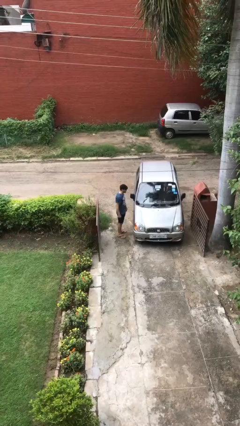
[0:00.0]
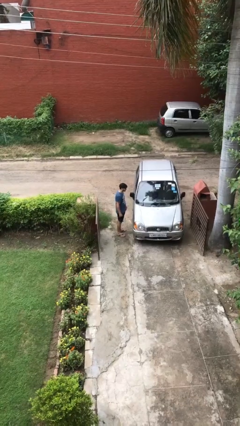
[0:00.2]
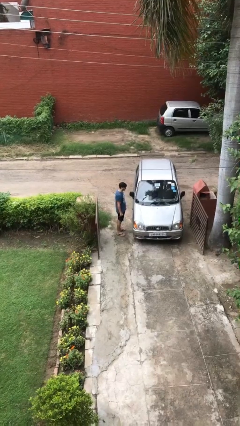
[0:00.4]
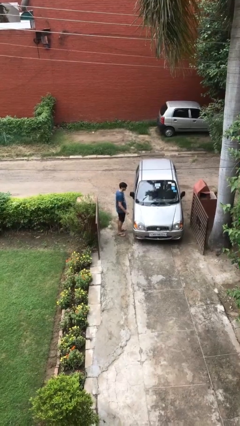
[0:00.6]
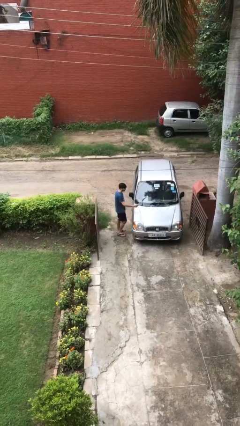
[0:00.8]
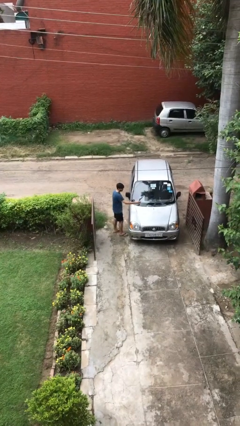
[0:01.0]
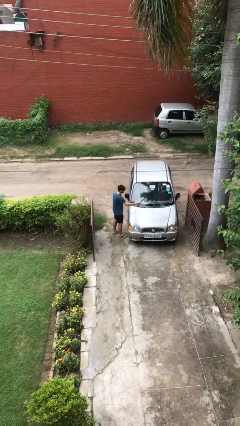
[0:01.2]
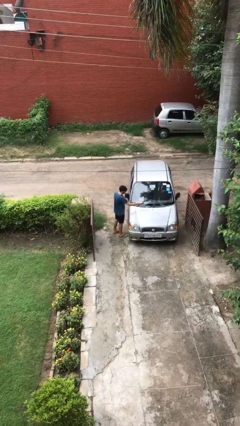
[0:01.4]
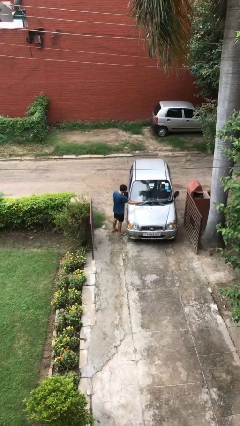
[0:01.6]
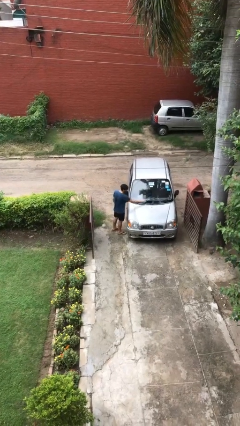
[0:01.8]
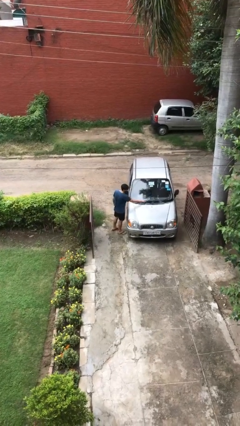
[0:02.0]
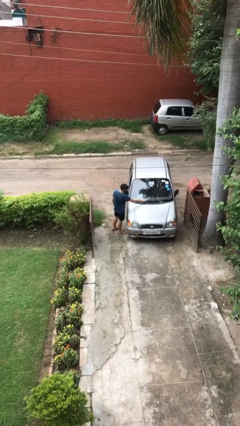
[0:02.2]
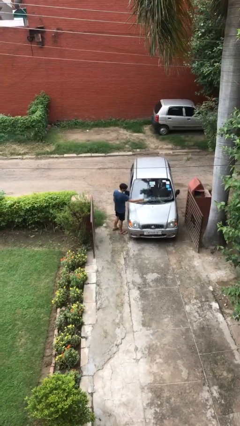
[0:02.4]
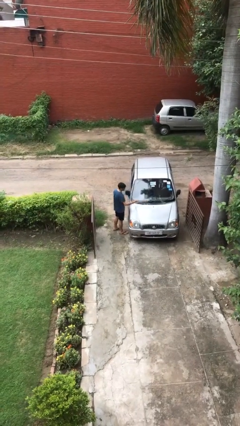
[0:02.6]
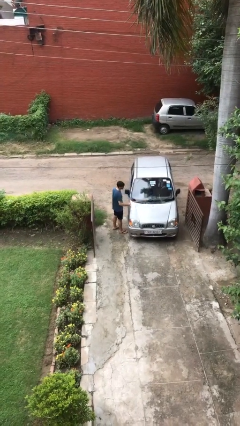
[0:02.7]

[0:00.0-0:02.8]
person flips down car wipers

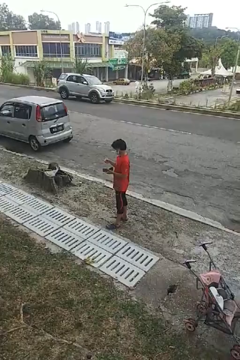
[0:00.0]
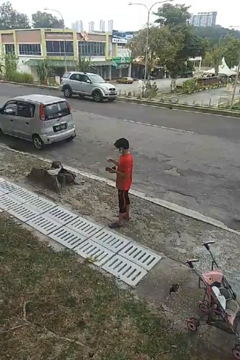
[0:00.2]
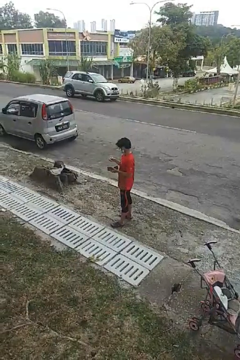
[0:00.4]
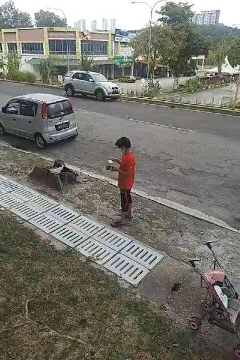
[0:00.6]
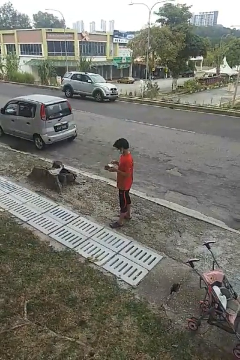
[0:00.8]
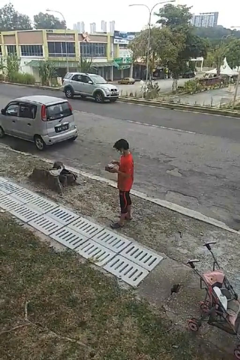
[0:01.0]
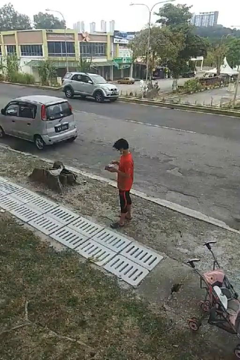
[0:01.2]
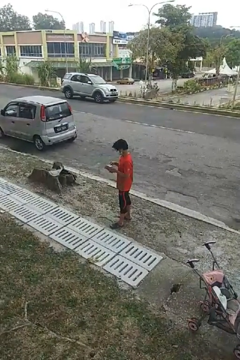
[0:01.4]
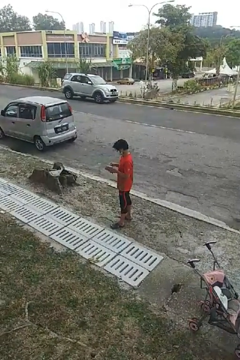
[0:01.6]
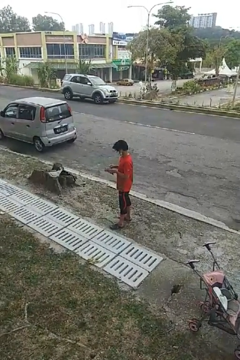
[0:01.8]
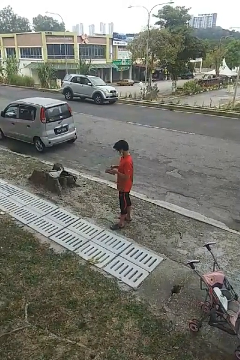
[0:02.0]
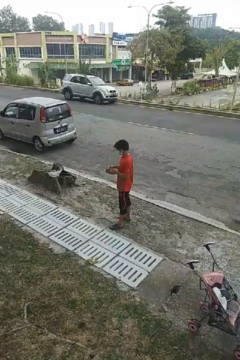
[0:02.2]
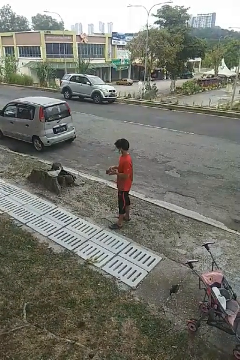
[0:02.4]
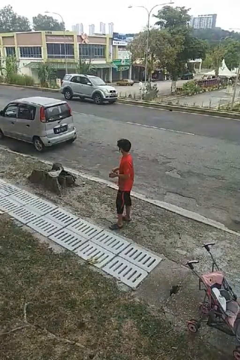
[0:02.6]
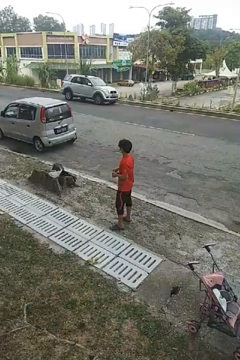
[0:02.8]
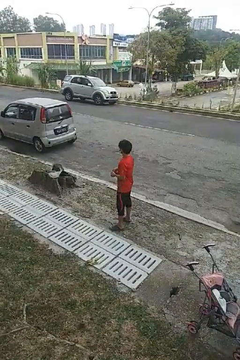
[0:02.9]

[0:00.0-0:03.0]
person puts object into purse

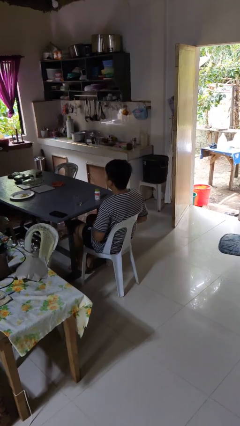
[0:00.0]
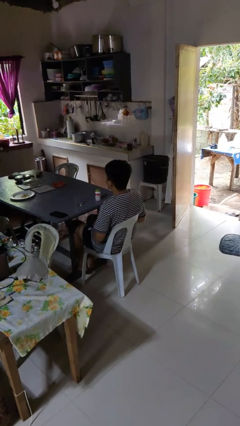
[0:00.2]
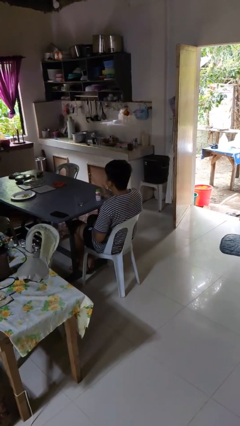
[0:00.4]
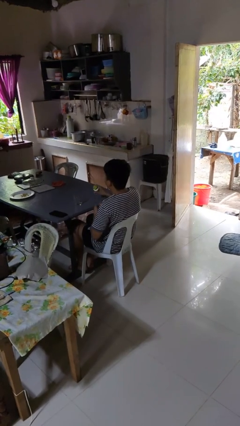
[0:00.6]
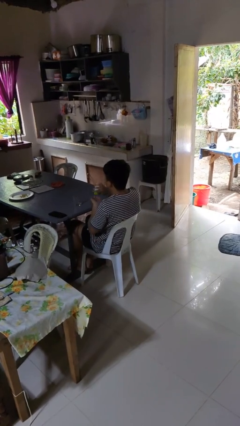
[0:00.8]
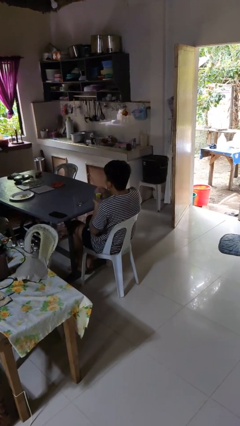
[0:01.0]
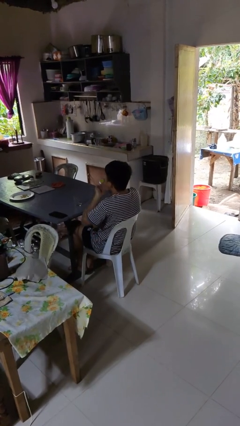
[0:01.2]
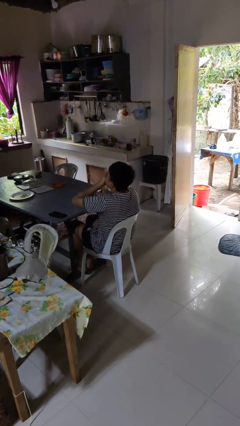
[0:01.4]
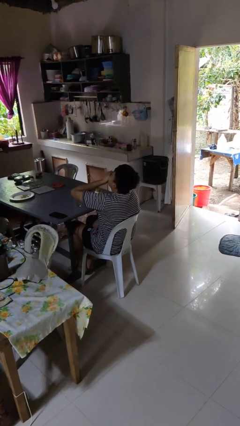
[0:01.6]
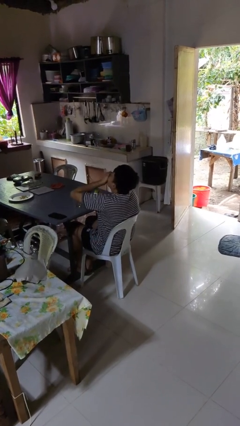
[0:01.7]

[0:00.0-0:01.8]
person takes medicine pills

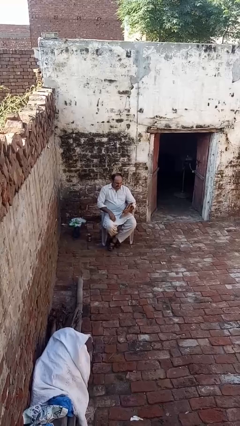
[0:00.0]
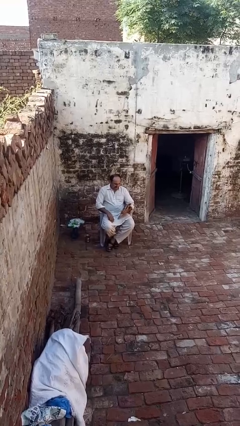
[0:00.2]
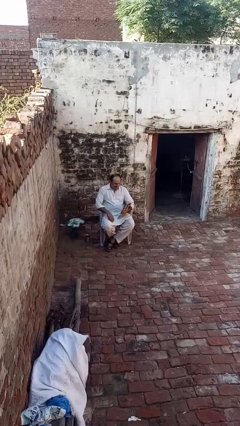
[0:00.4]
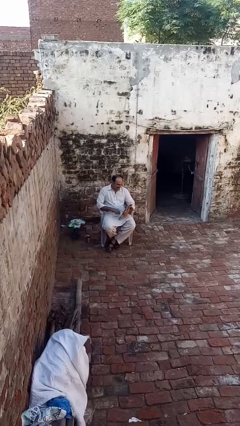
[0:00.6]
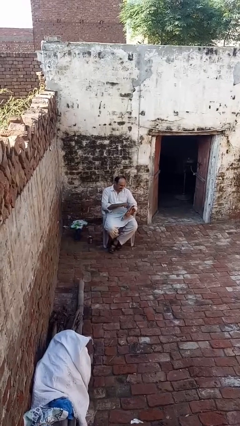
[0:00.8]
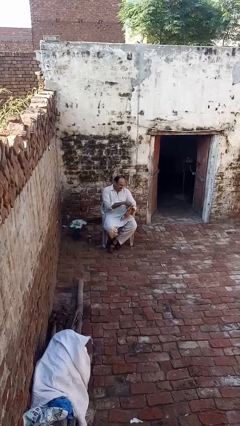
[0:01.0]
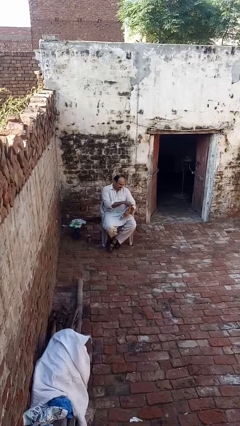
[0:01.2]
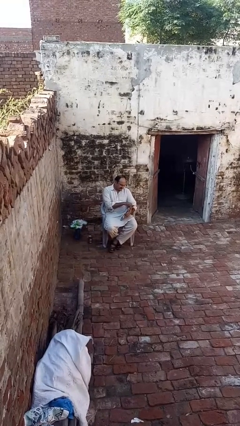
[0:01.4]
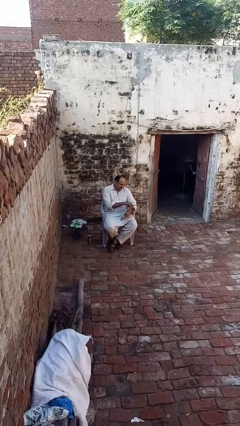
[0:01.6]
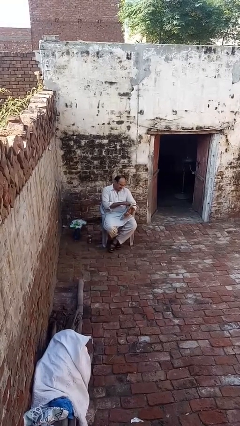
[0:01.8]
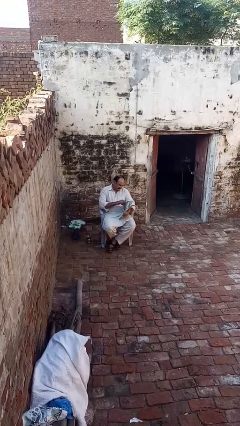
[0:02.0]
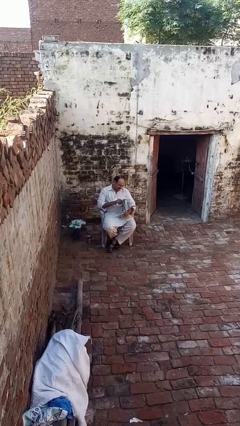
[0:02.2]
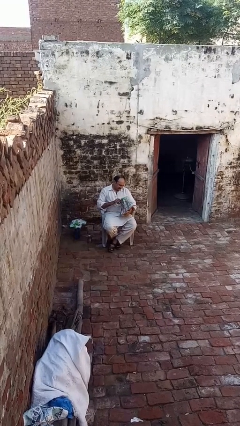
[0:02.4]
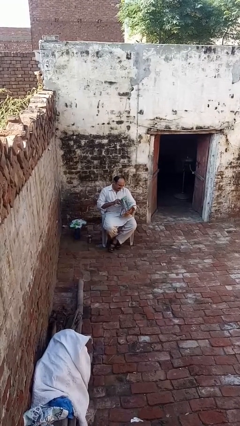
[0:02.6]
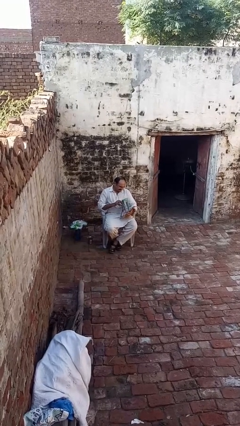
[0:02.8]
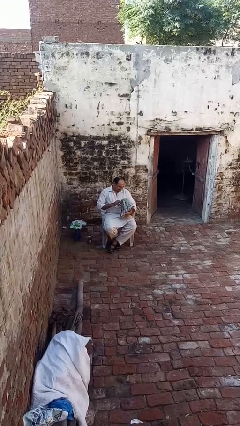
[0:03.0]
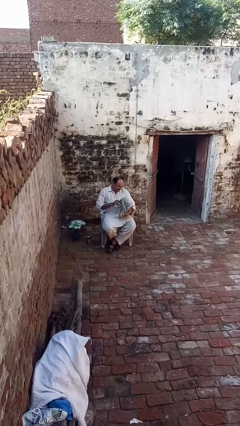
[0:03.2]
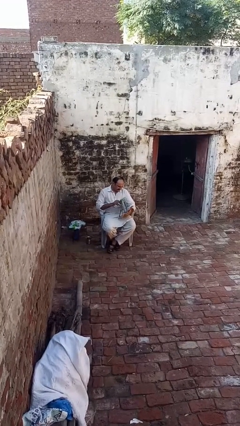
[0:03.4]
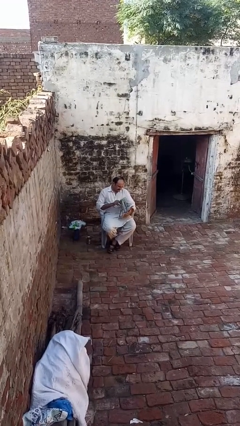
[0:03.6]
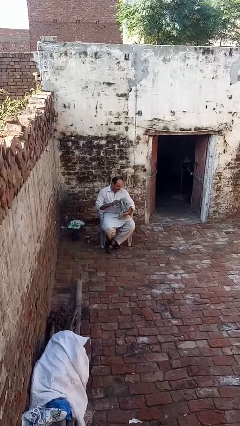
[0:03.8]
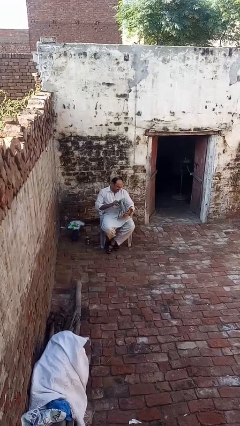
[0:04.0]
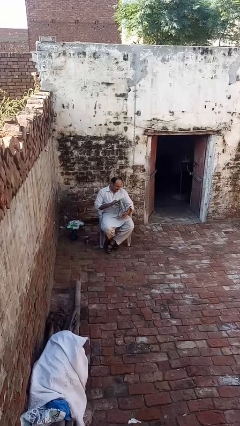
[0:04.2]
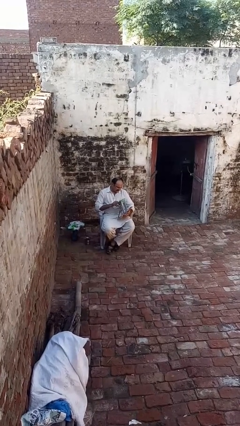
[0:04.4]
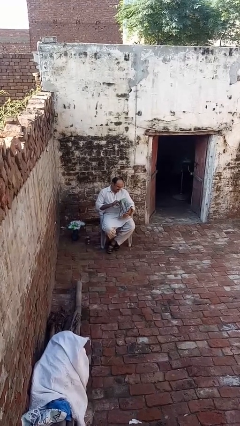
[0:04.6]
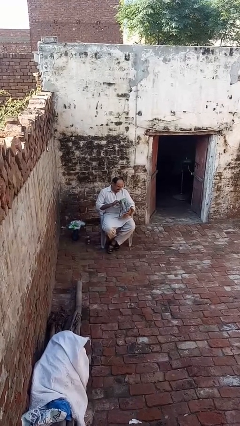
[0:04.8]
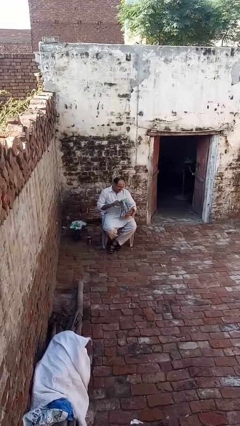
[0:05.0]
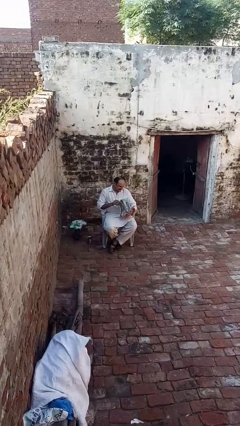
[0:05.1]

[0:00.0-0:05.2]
person reads magazine

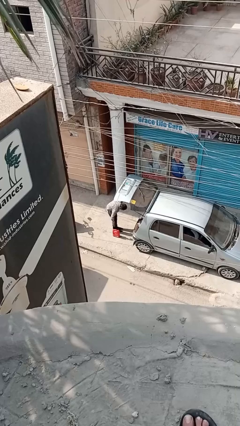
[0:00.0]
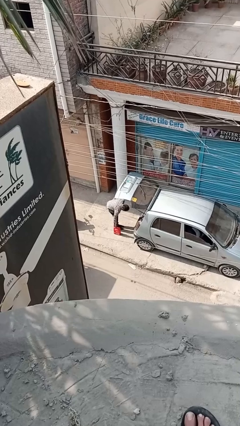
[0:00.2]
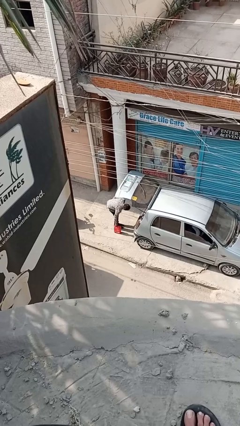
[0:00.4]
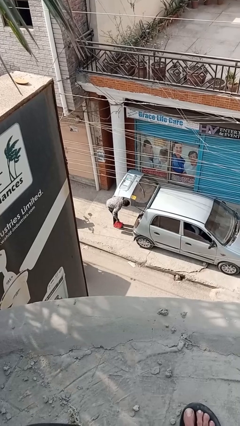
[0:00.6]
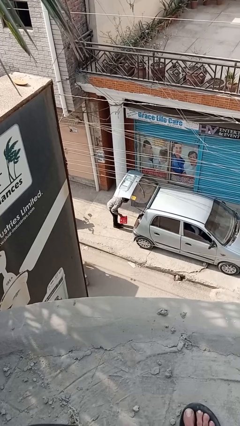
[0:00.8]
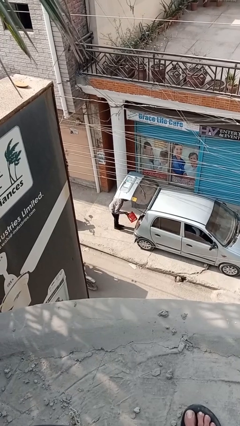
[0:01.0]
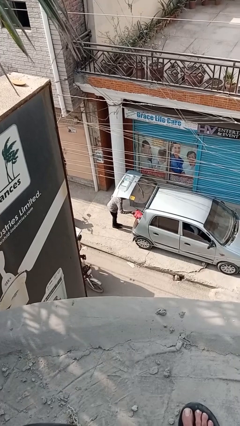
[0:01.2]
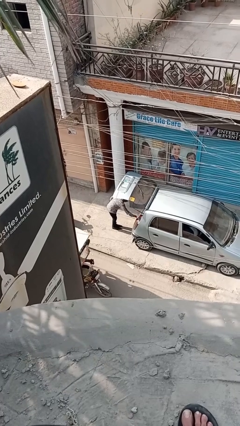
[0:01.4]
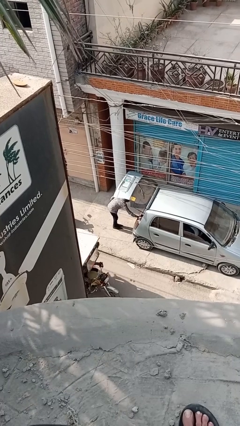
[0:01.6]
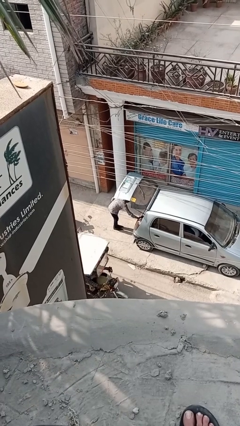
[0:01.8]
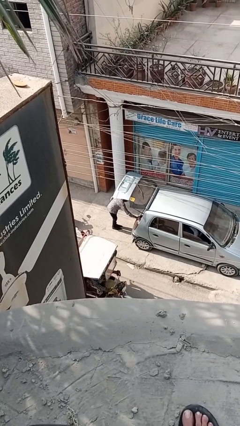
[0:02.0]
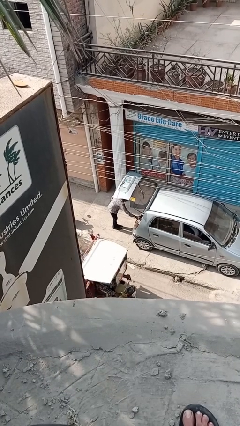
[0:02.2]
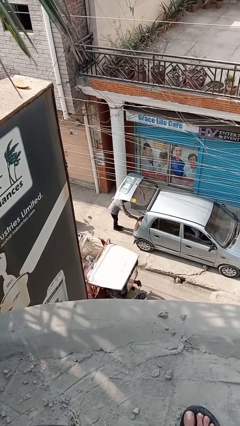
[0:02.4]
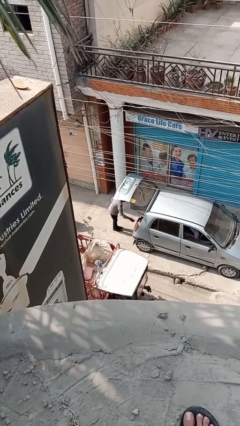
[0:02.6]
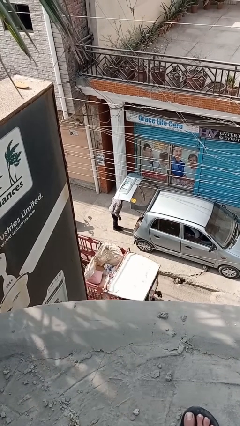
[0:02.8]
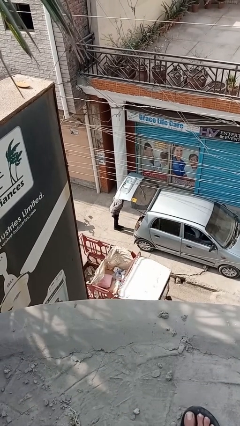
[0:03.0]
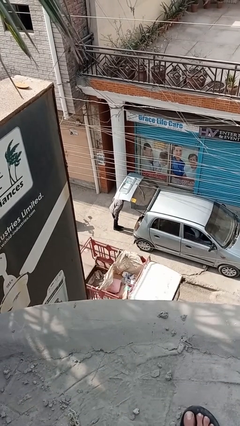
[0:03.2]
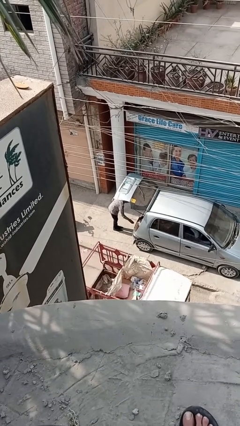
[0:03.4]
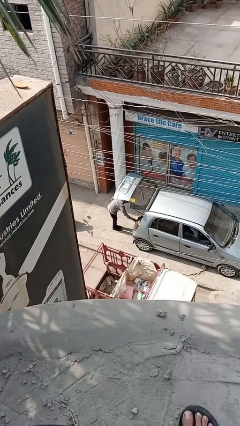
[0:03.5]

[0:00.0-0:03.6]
person loads car

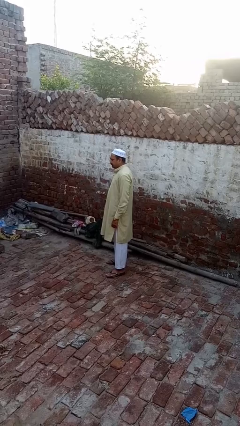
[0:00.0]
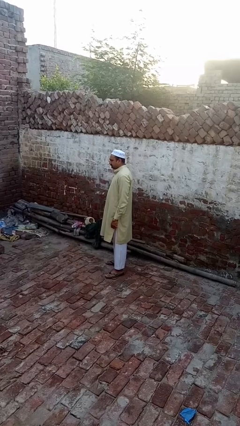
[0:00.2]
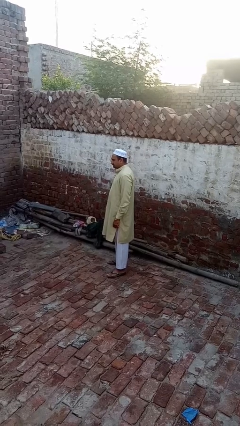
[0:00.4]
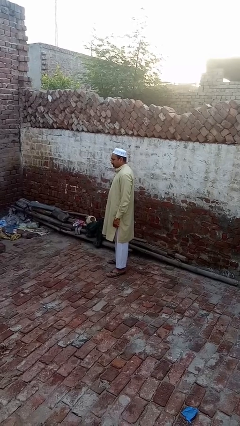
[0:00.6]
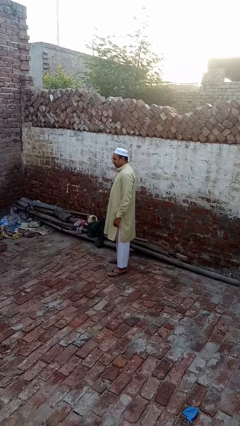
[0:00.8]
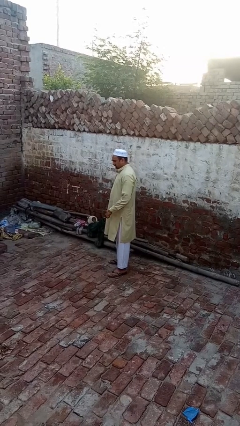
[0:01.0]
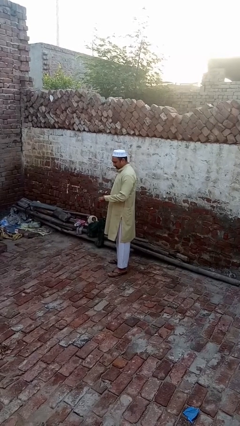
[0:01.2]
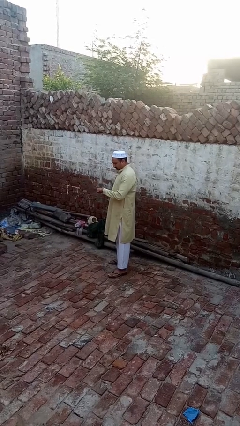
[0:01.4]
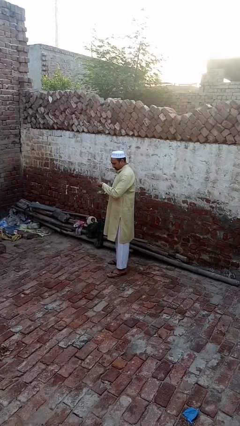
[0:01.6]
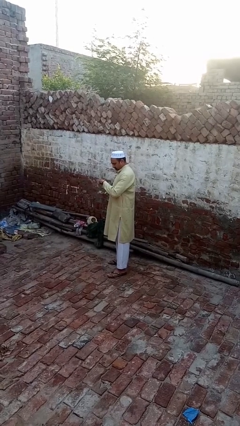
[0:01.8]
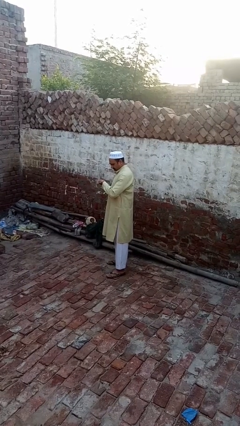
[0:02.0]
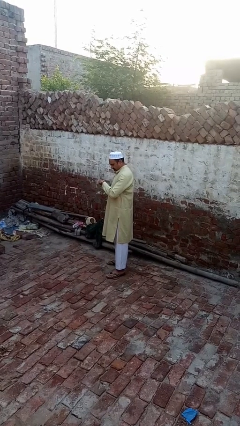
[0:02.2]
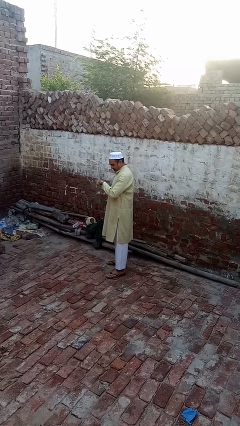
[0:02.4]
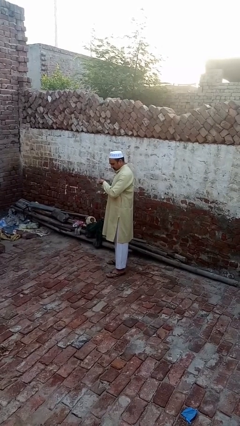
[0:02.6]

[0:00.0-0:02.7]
person looks at wristwatch
